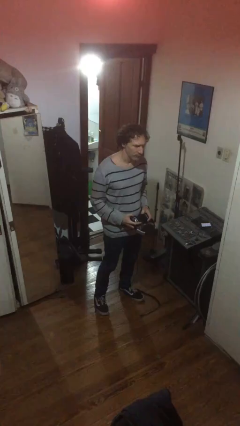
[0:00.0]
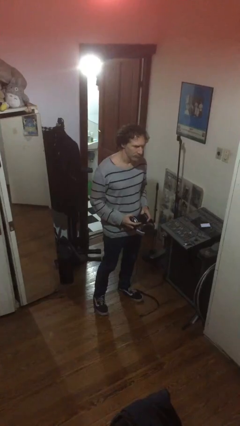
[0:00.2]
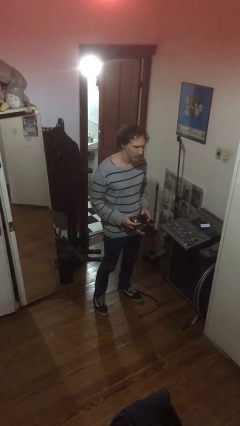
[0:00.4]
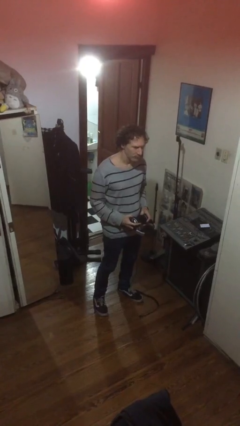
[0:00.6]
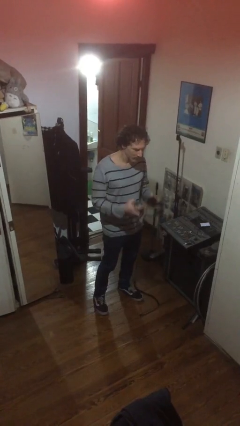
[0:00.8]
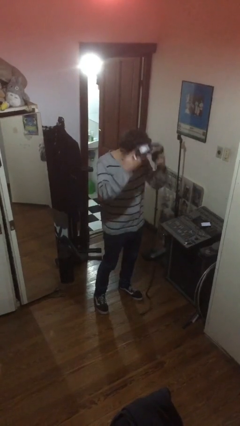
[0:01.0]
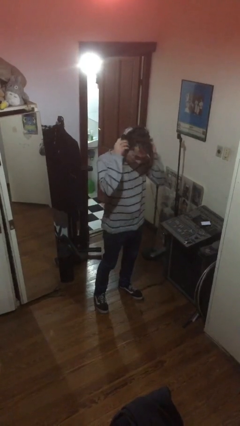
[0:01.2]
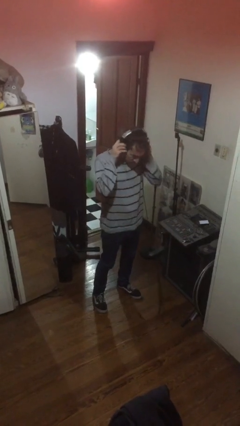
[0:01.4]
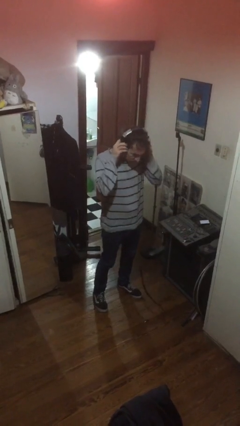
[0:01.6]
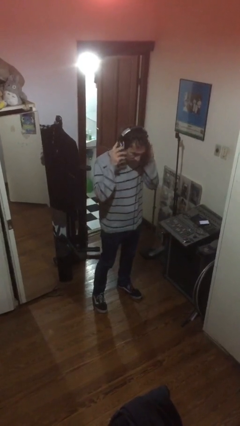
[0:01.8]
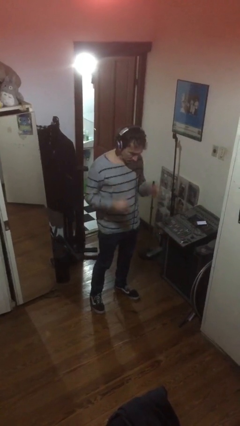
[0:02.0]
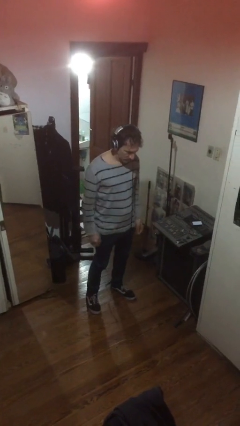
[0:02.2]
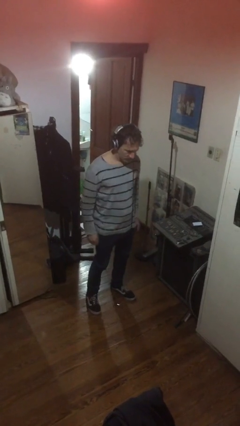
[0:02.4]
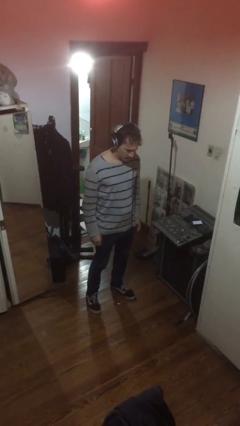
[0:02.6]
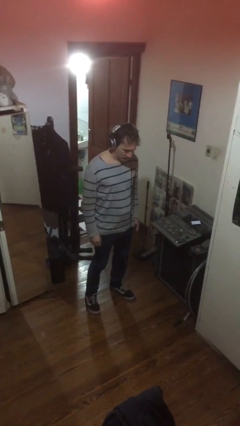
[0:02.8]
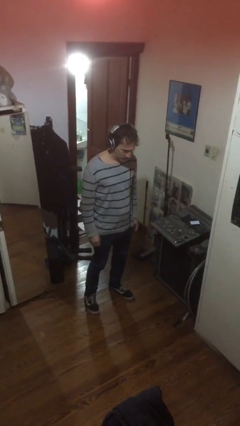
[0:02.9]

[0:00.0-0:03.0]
person puts on headphones

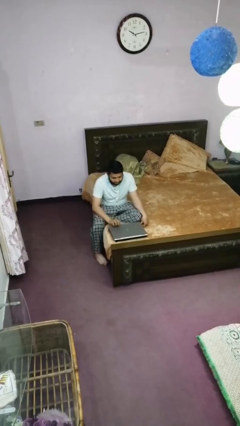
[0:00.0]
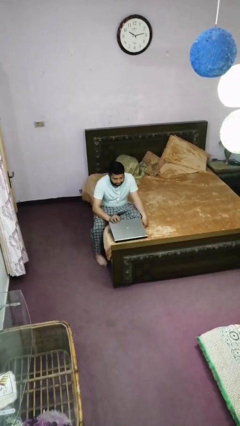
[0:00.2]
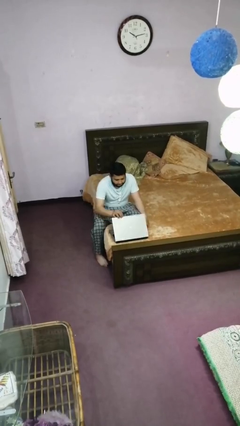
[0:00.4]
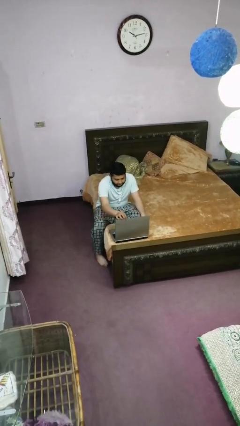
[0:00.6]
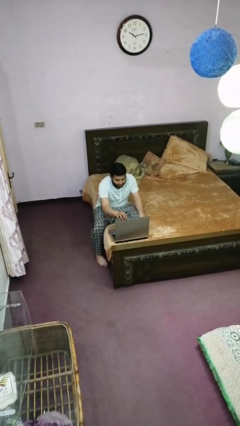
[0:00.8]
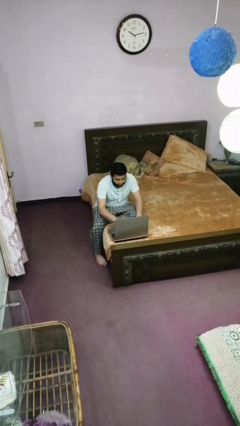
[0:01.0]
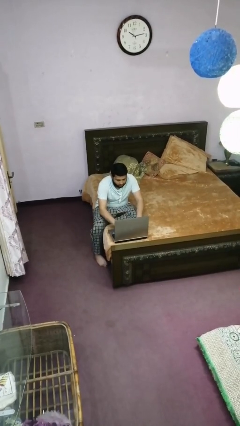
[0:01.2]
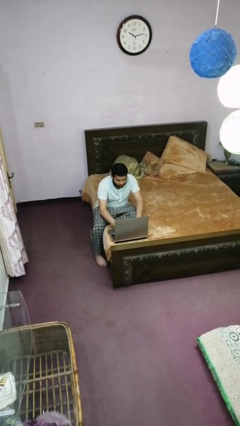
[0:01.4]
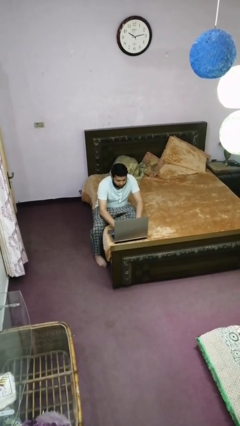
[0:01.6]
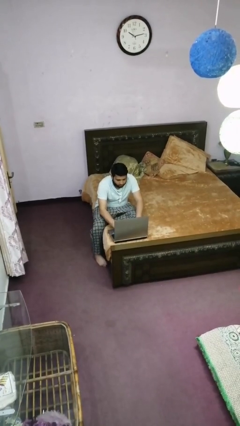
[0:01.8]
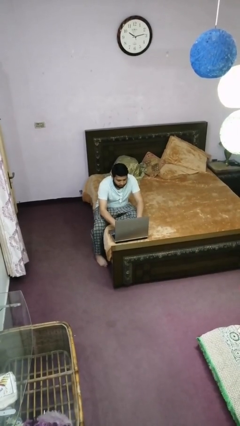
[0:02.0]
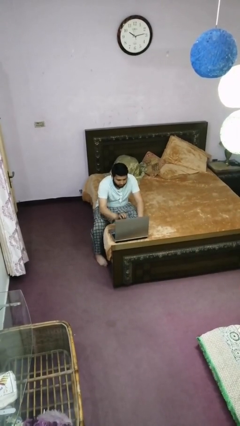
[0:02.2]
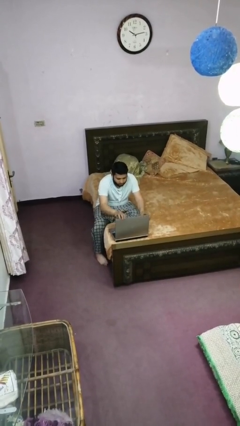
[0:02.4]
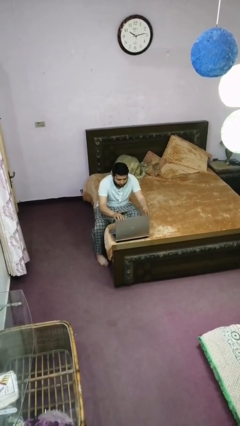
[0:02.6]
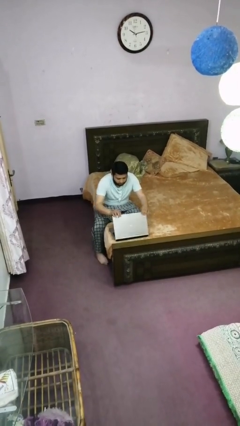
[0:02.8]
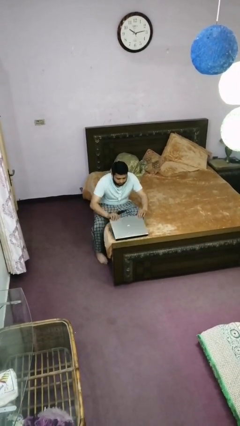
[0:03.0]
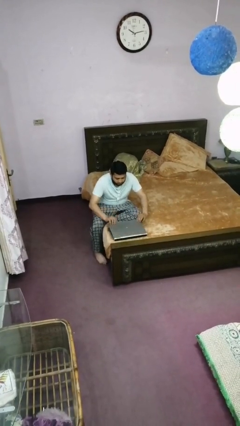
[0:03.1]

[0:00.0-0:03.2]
person interacts with laptop

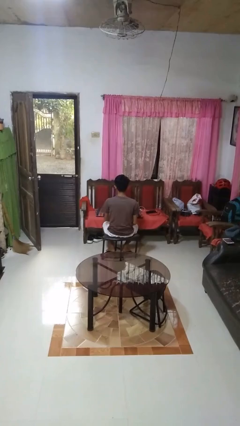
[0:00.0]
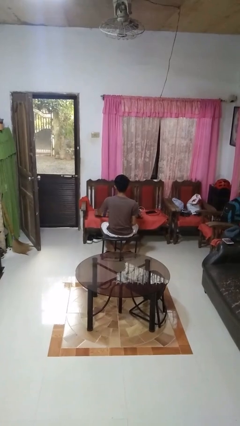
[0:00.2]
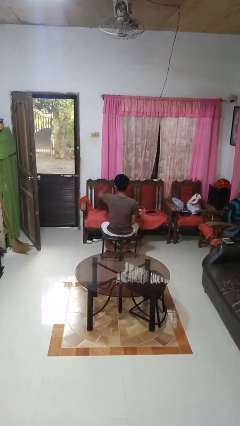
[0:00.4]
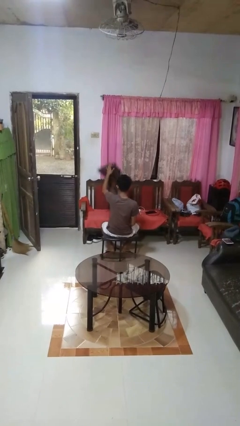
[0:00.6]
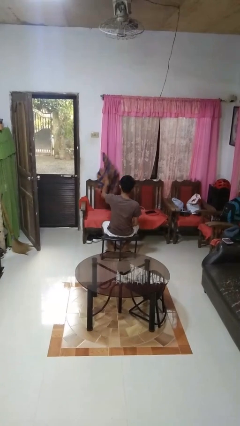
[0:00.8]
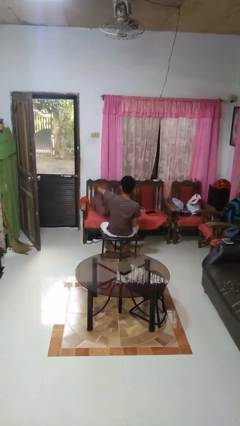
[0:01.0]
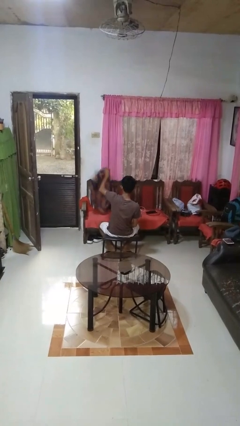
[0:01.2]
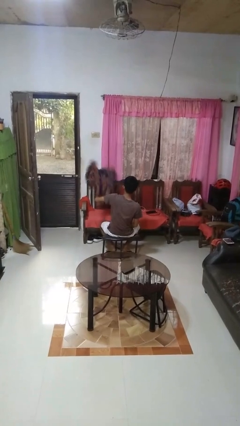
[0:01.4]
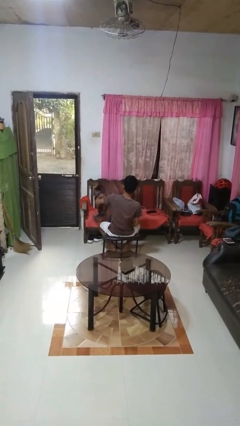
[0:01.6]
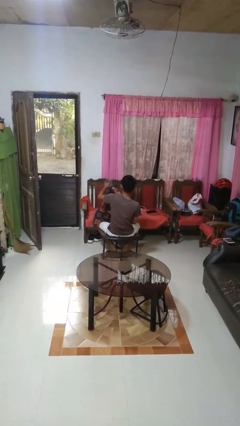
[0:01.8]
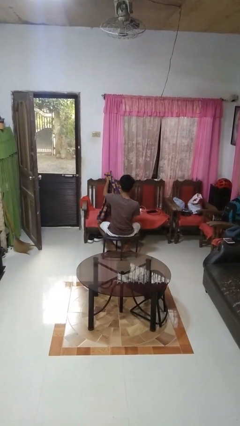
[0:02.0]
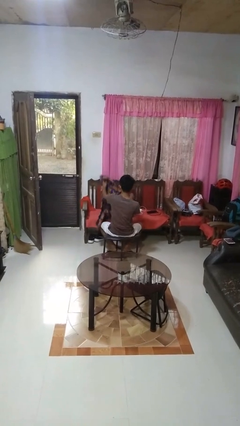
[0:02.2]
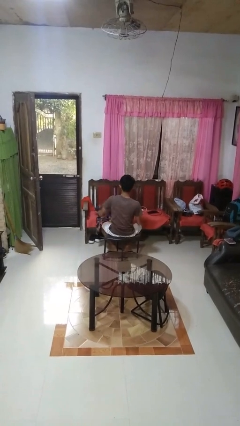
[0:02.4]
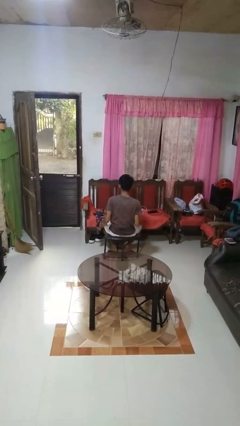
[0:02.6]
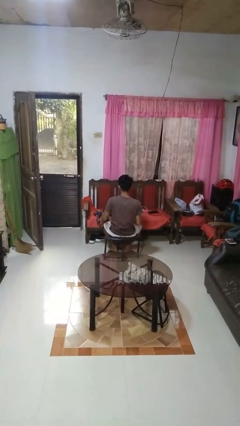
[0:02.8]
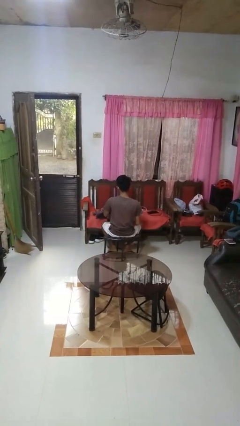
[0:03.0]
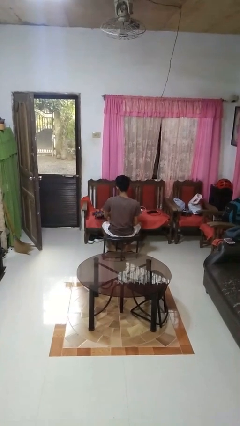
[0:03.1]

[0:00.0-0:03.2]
person unfolds blanket

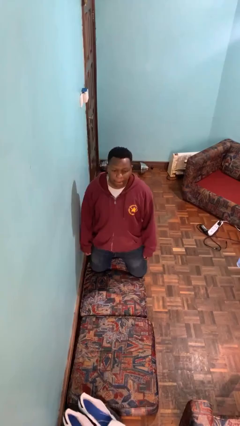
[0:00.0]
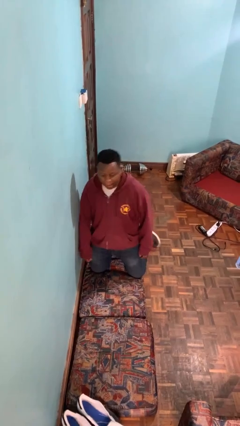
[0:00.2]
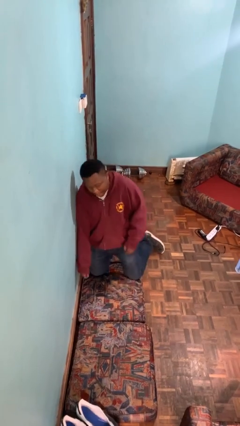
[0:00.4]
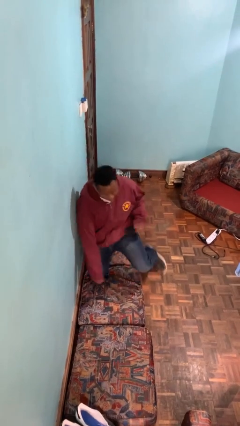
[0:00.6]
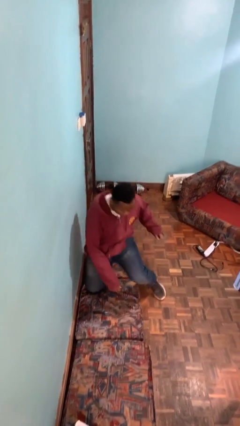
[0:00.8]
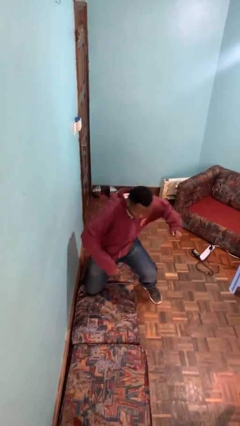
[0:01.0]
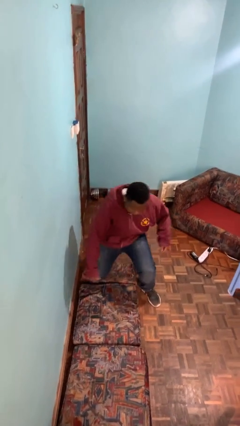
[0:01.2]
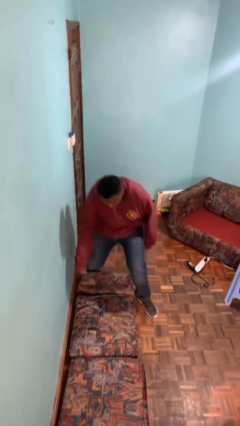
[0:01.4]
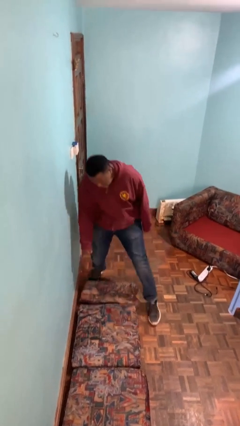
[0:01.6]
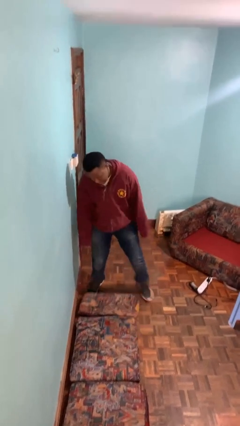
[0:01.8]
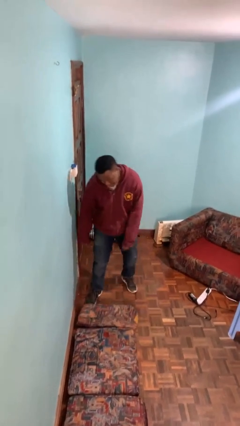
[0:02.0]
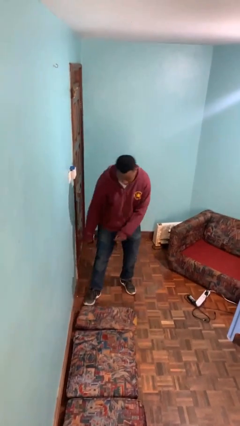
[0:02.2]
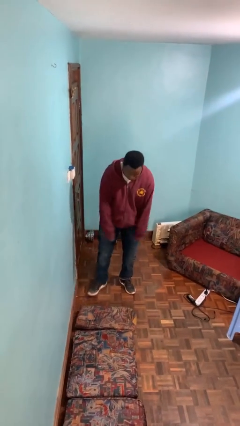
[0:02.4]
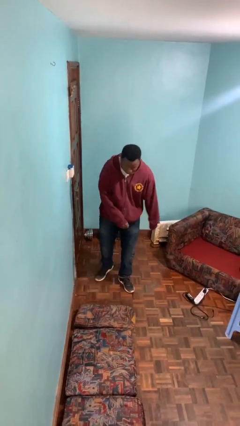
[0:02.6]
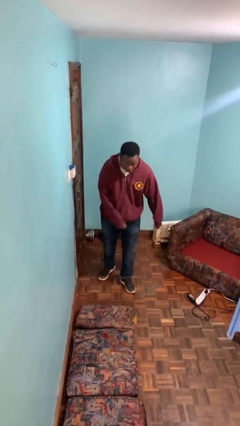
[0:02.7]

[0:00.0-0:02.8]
person stands up from floor

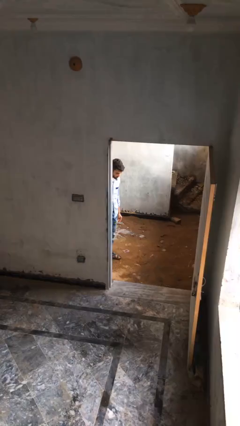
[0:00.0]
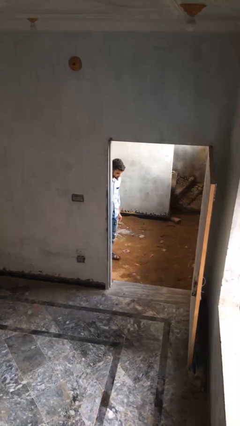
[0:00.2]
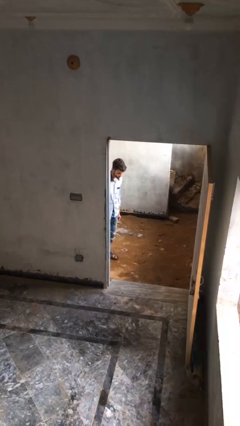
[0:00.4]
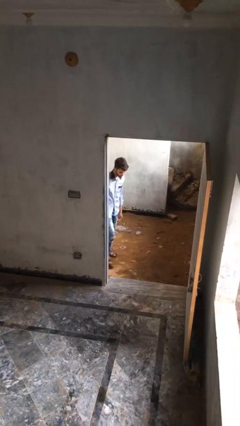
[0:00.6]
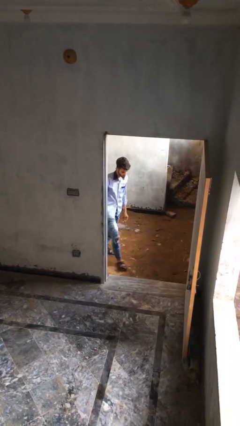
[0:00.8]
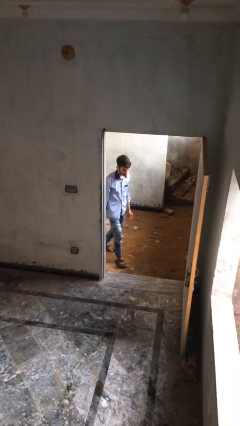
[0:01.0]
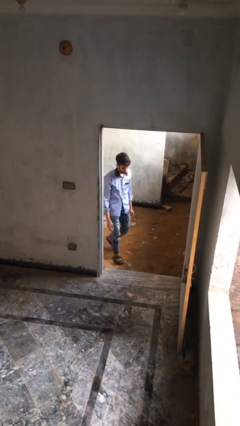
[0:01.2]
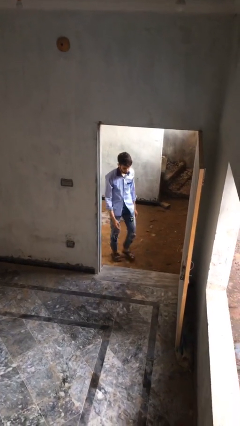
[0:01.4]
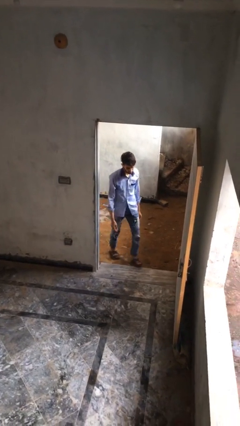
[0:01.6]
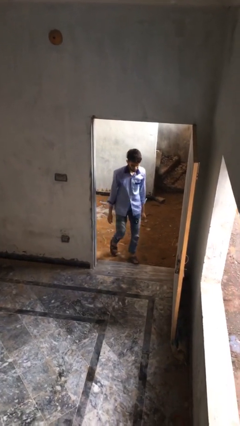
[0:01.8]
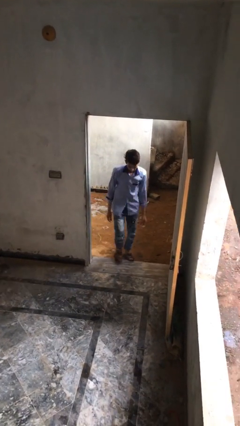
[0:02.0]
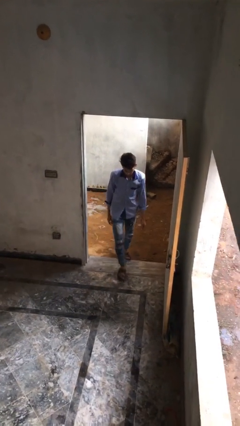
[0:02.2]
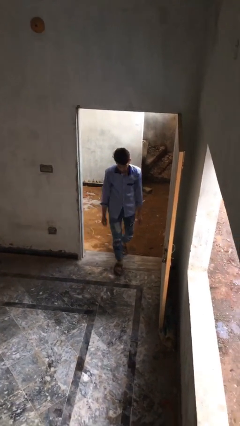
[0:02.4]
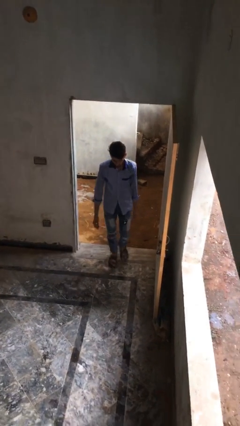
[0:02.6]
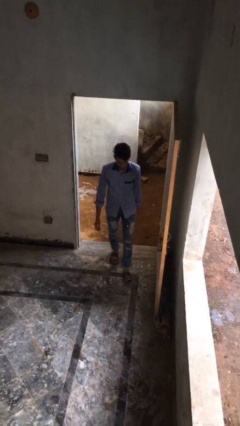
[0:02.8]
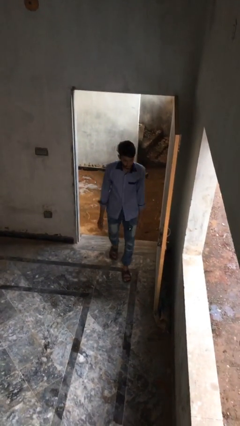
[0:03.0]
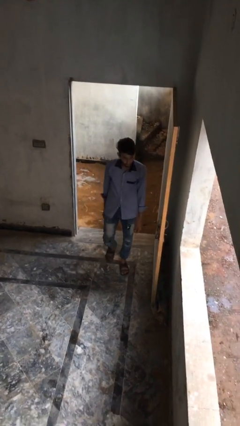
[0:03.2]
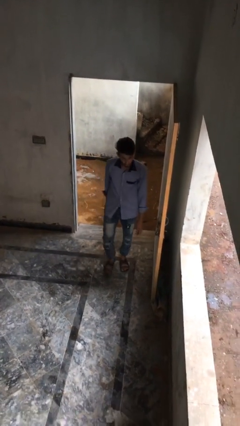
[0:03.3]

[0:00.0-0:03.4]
person enters scene through structure

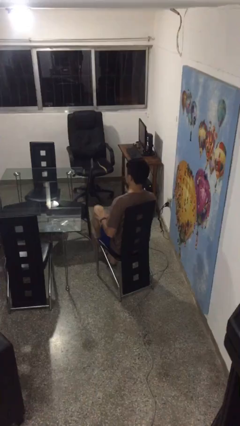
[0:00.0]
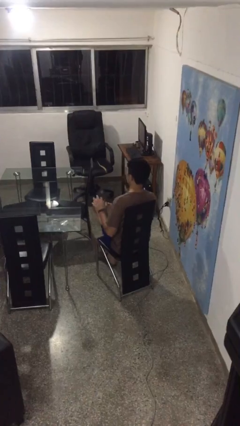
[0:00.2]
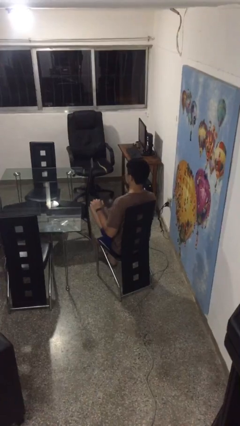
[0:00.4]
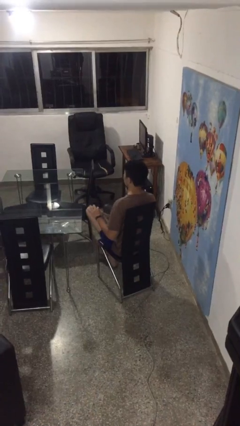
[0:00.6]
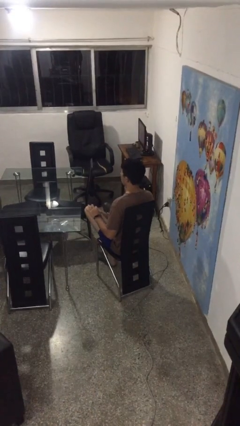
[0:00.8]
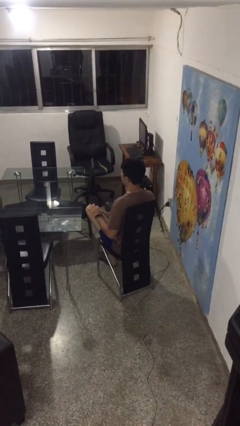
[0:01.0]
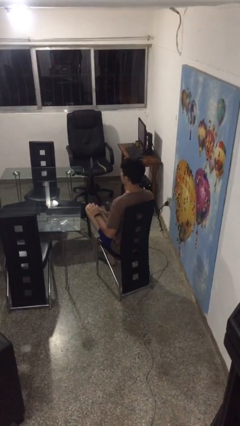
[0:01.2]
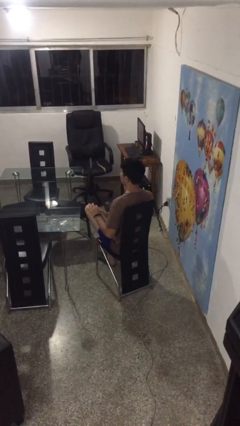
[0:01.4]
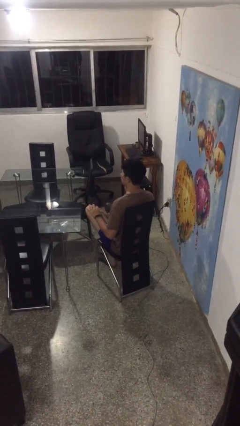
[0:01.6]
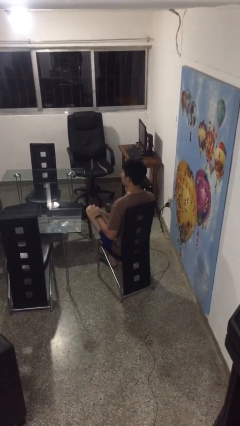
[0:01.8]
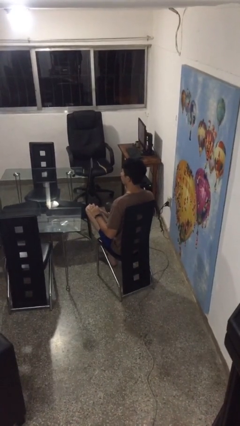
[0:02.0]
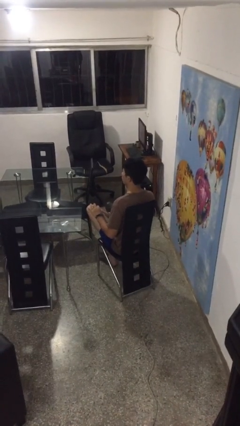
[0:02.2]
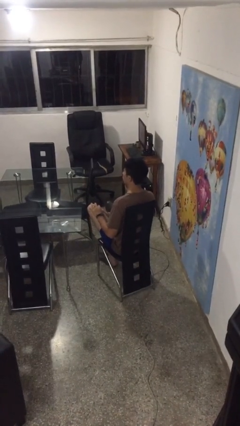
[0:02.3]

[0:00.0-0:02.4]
person crosses legs
